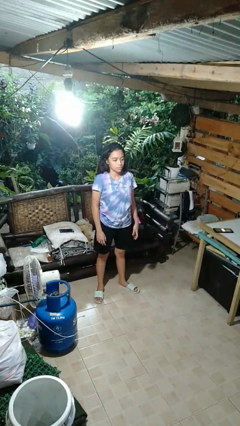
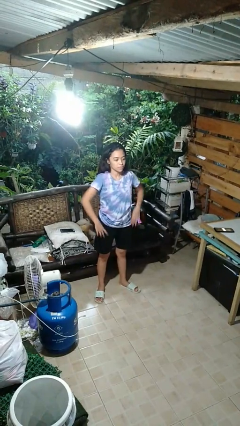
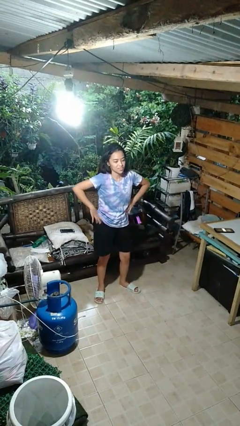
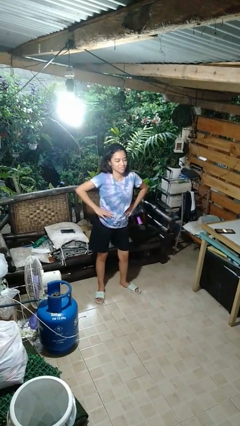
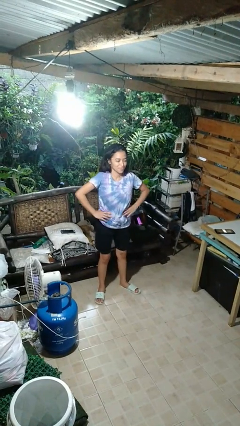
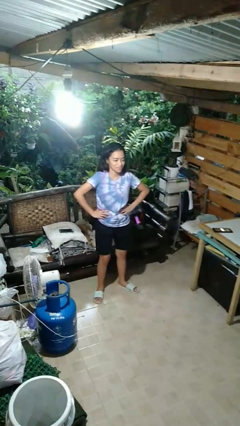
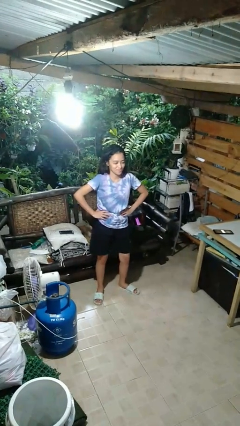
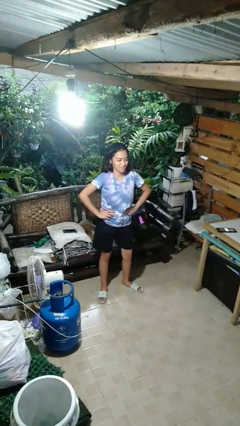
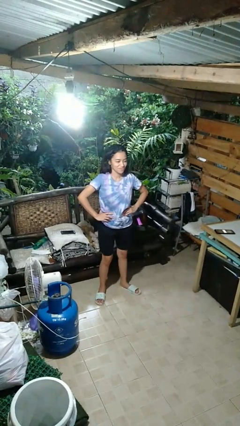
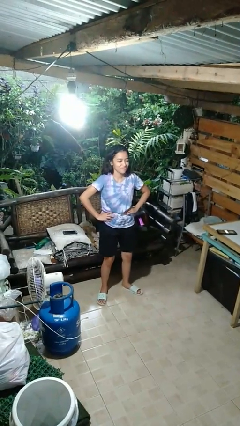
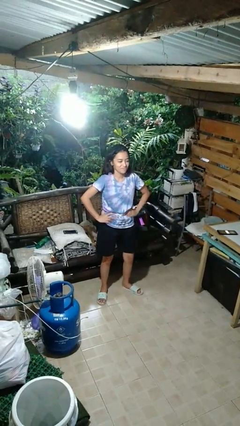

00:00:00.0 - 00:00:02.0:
person wiggles hips

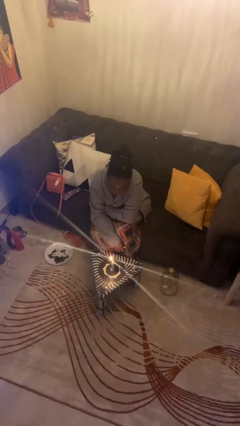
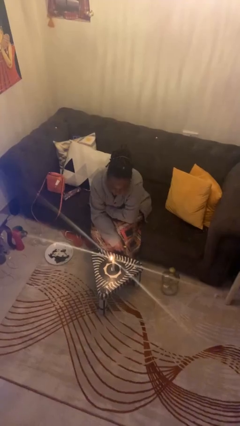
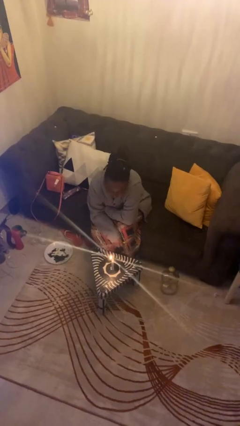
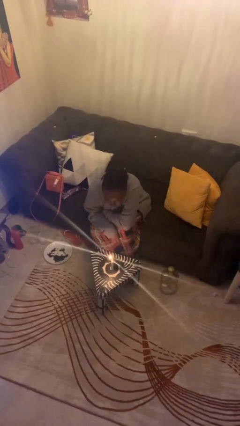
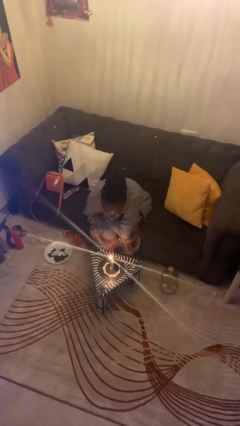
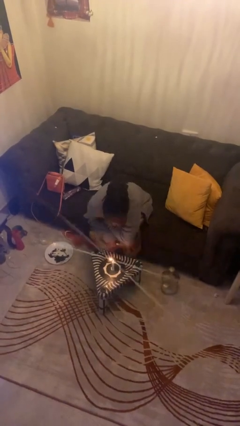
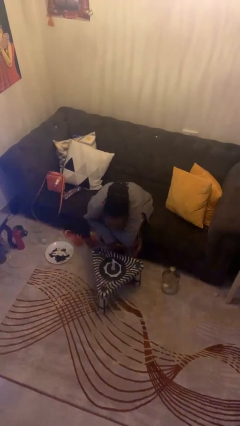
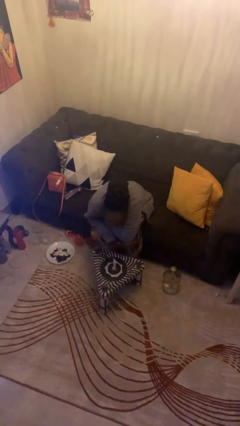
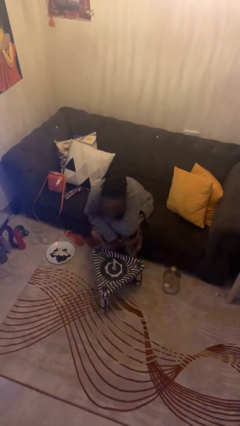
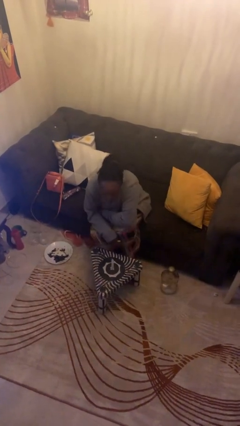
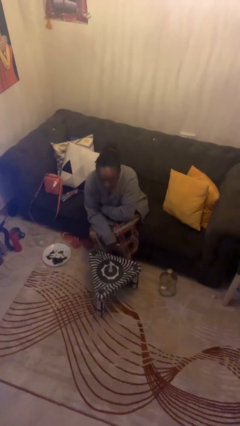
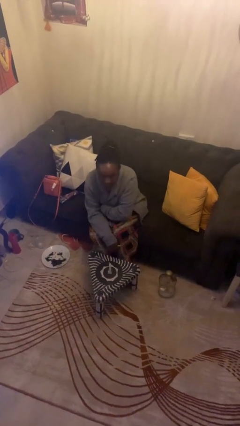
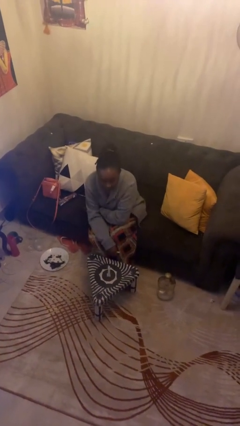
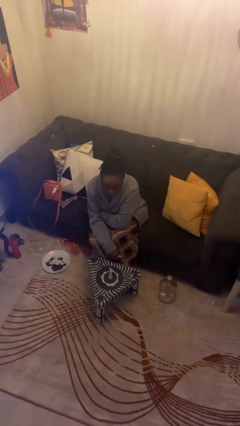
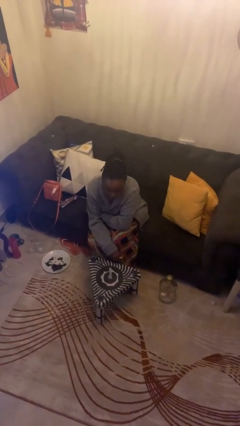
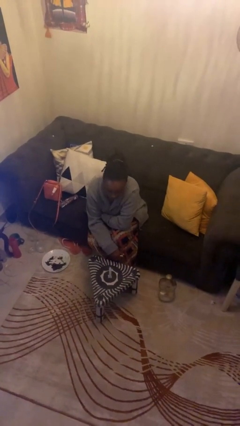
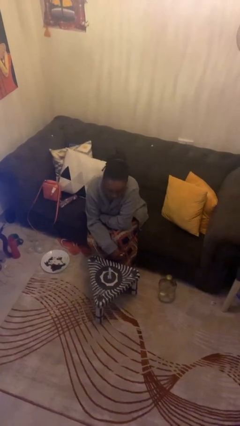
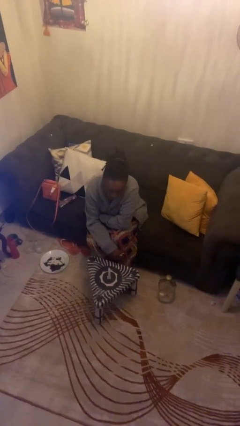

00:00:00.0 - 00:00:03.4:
person extinguishes candle

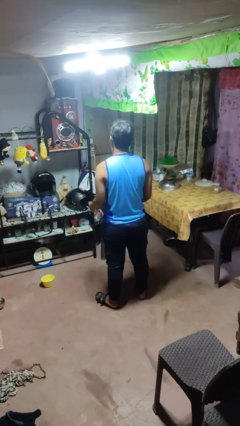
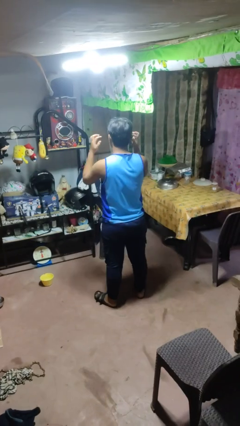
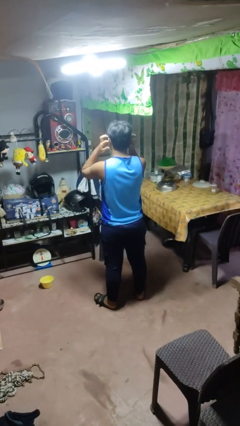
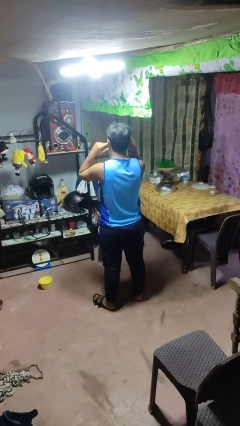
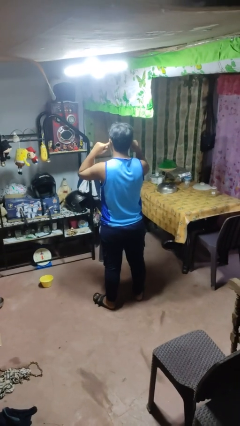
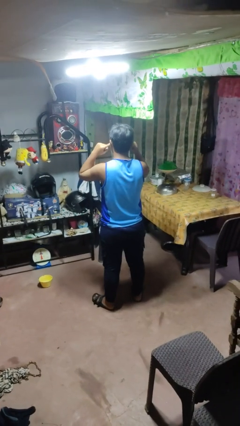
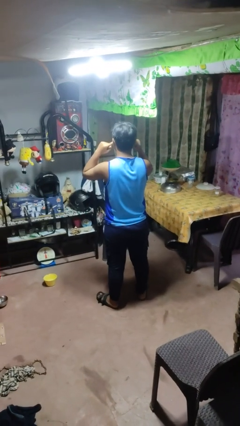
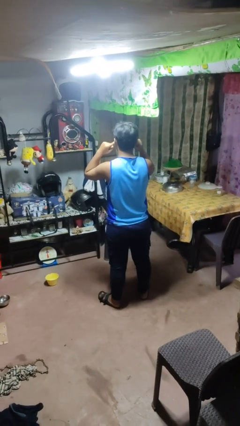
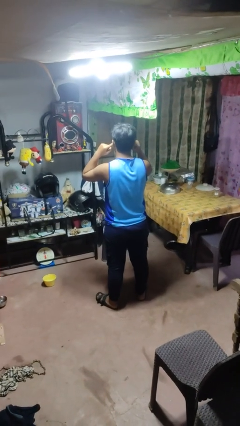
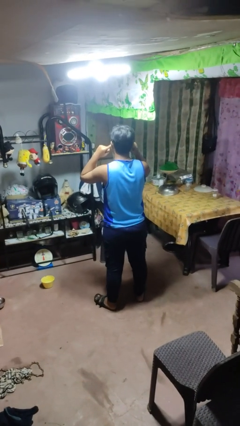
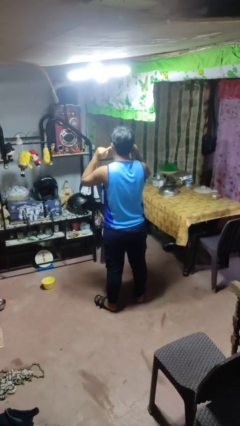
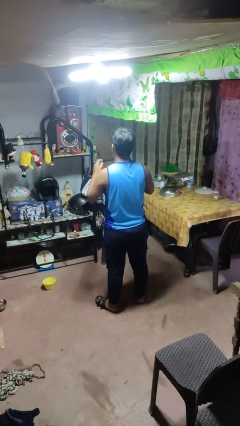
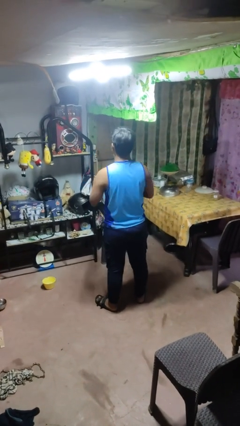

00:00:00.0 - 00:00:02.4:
person puts fingers in ear

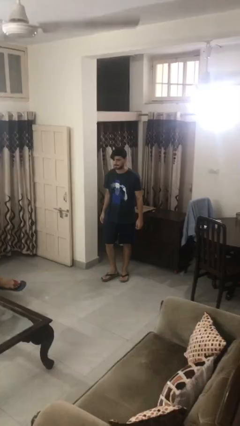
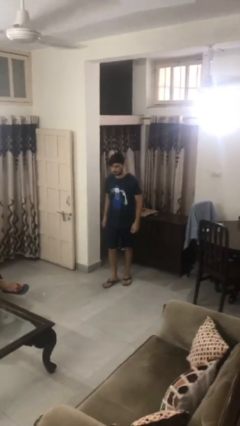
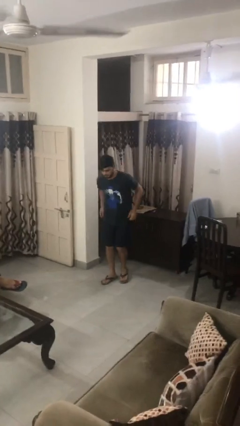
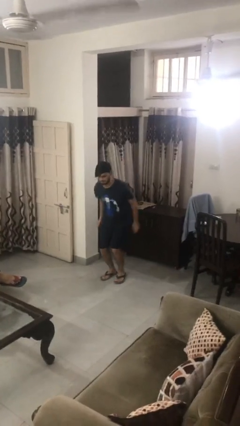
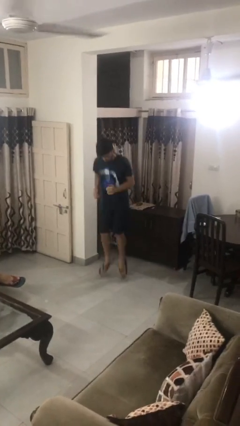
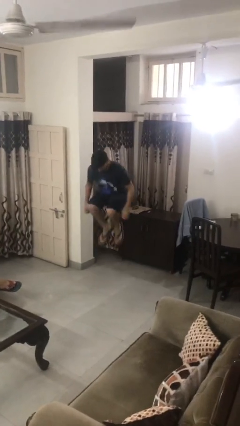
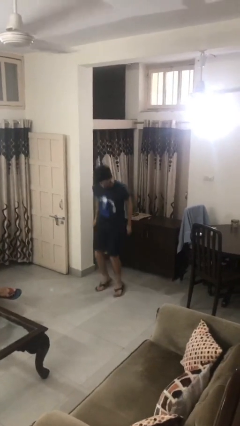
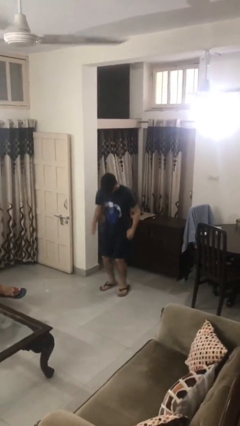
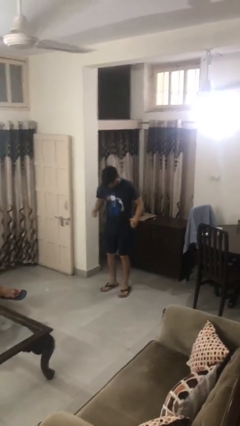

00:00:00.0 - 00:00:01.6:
person jumps

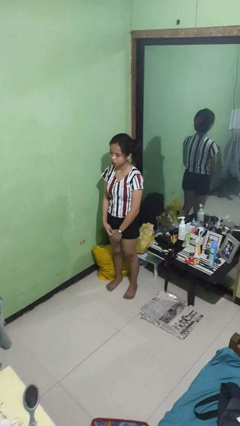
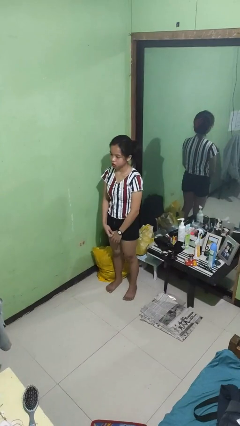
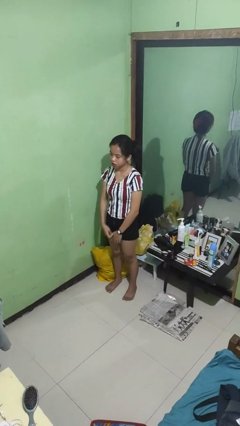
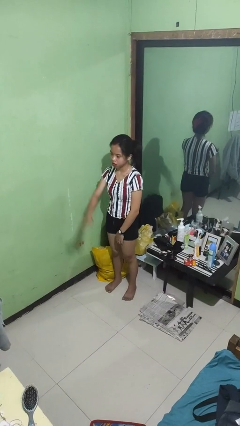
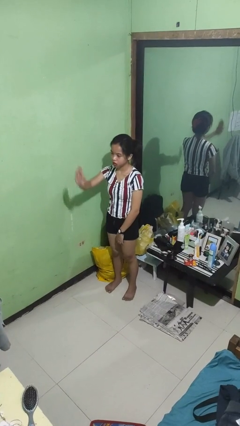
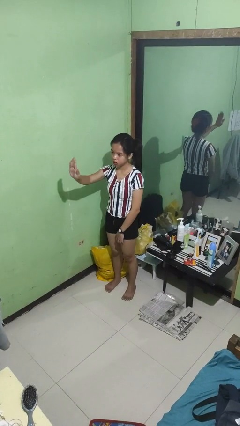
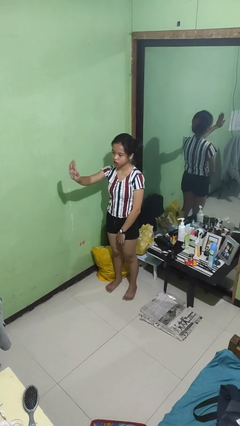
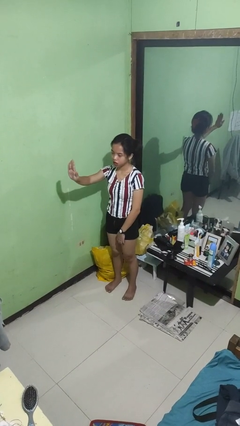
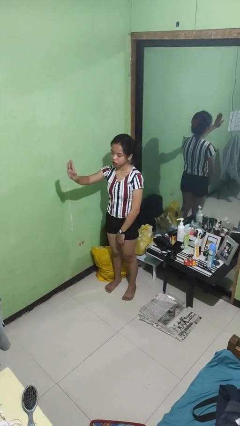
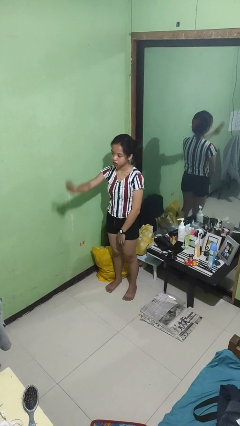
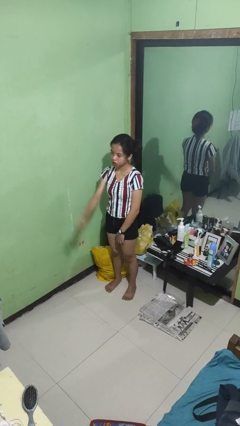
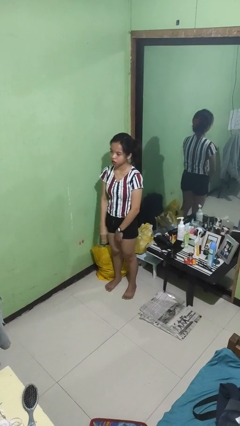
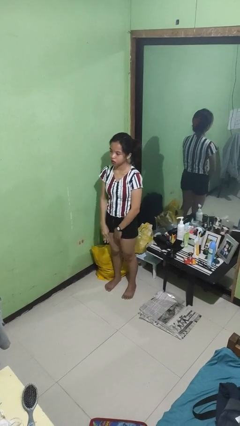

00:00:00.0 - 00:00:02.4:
person gestures stop

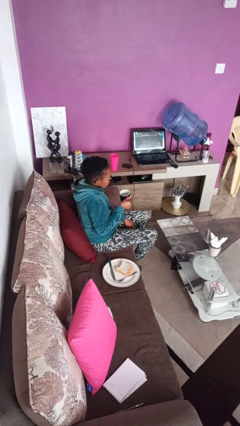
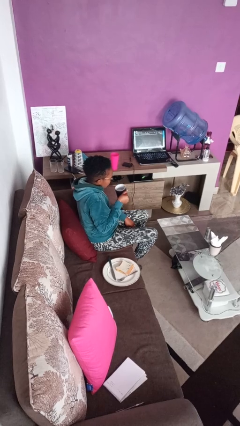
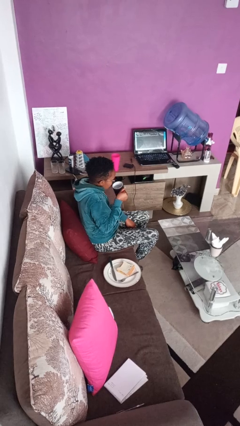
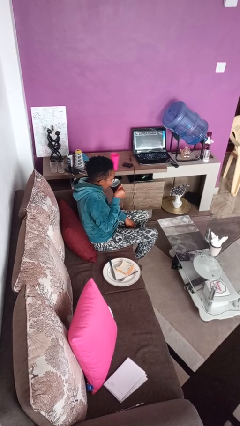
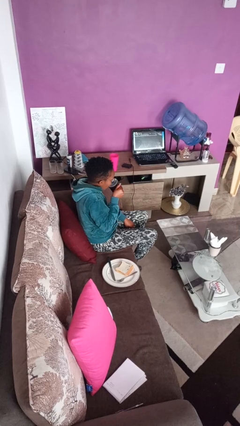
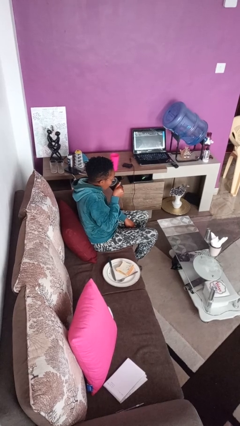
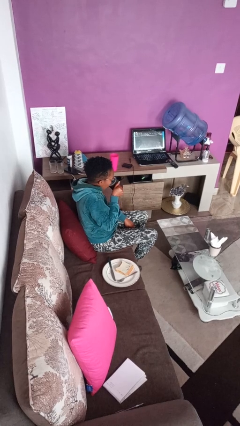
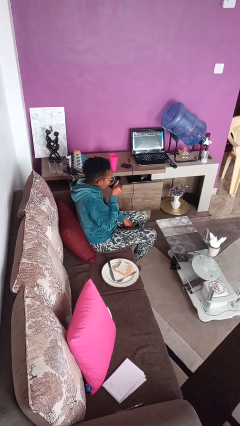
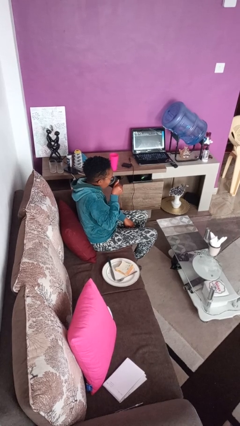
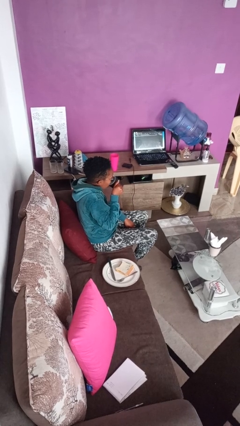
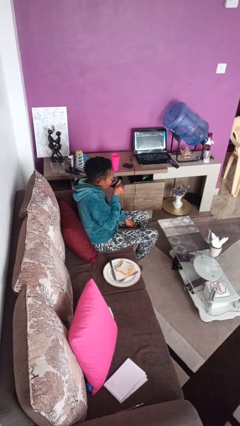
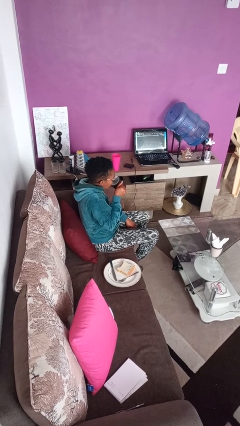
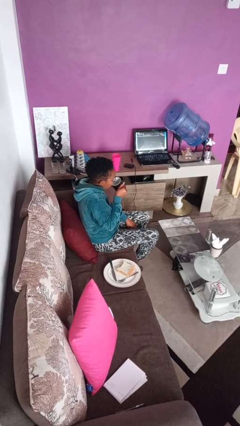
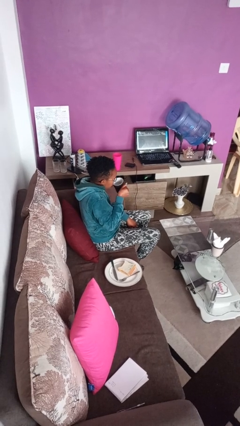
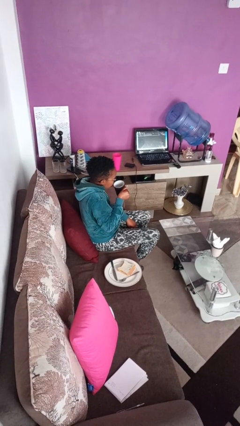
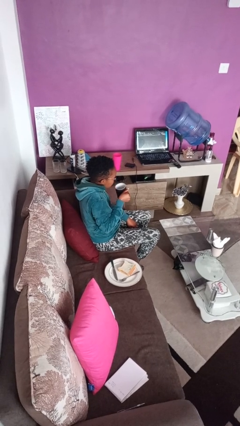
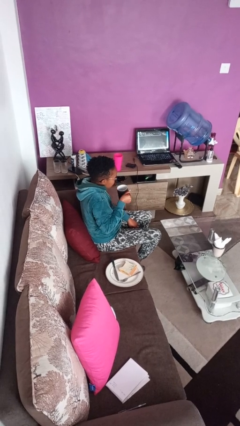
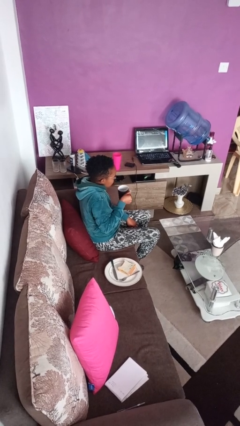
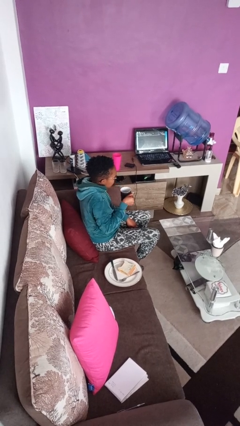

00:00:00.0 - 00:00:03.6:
person drinks from mug

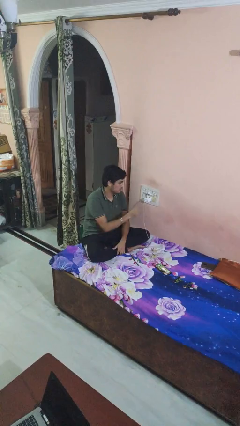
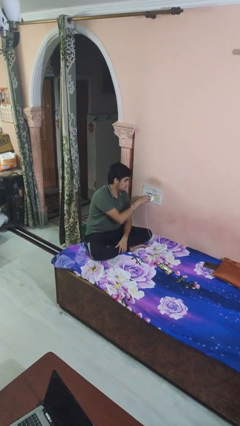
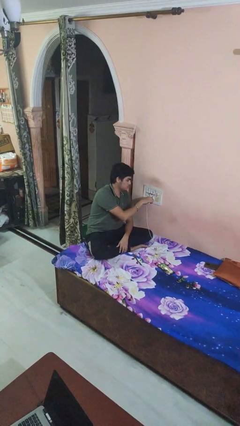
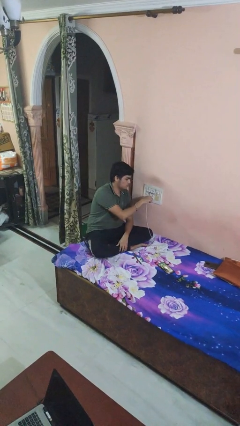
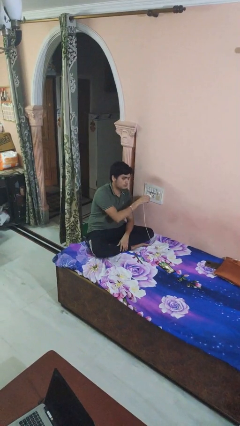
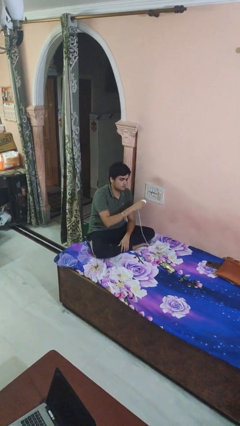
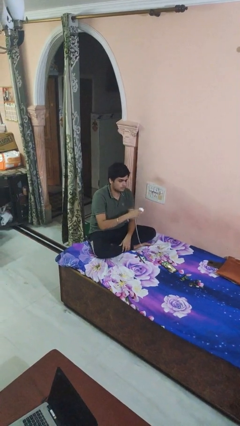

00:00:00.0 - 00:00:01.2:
person unplugs from electrical socket

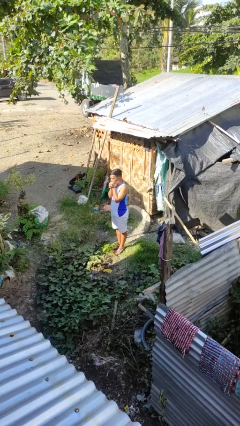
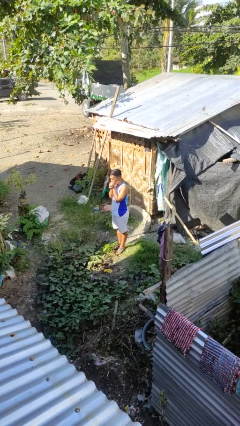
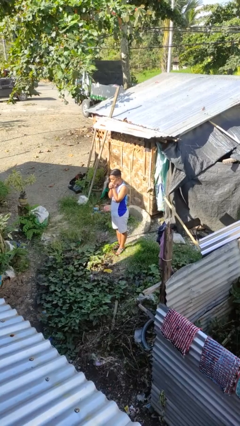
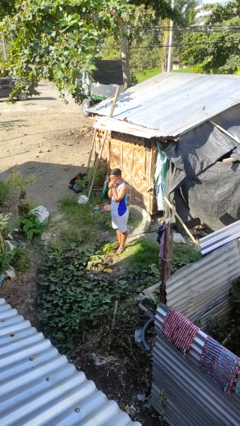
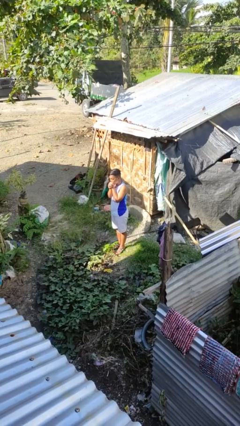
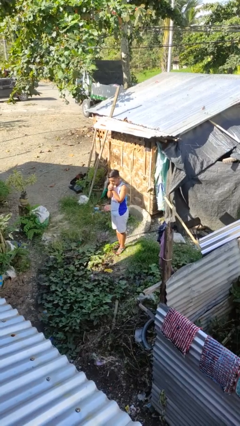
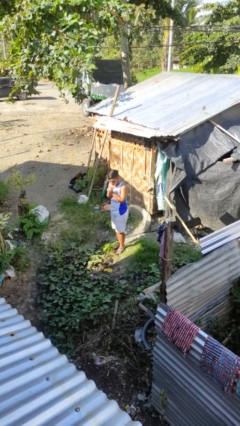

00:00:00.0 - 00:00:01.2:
person blows into hands
